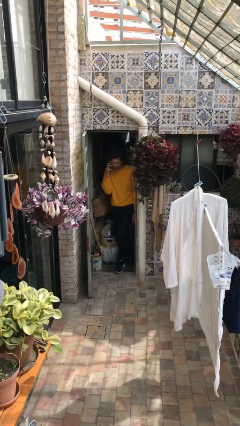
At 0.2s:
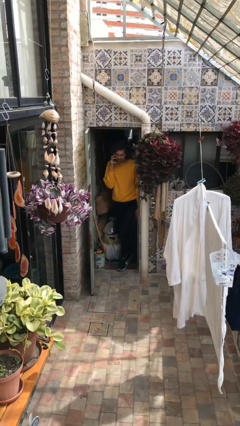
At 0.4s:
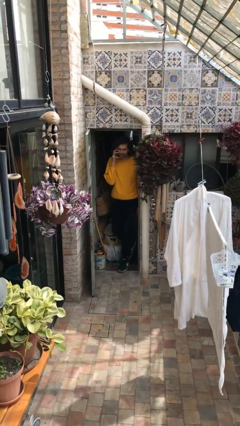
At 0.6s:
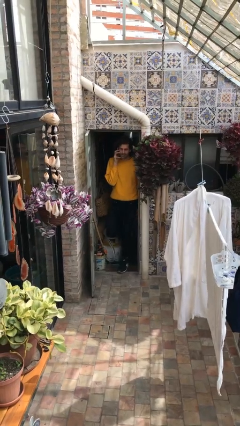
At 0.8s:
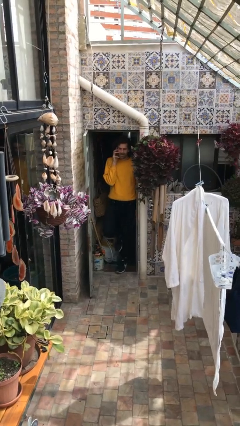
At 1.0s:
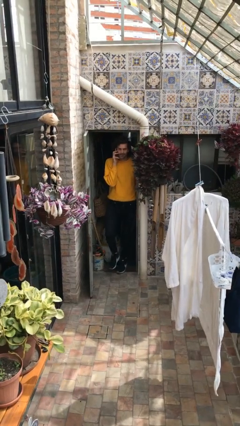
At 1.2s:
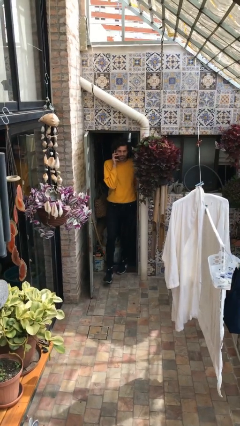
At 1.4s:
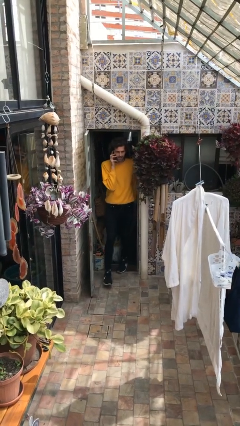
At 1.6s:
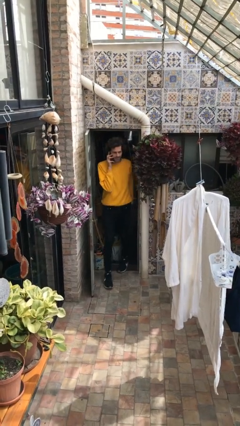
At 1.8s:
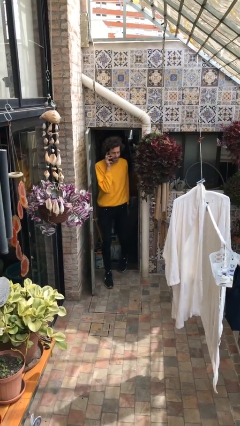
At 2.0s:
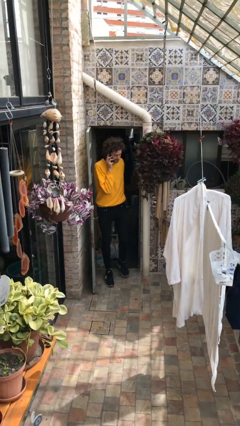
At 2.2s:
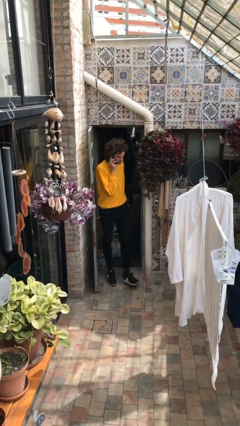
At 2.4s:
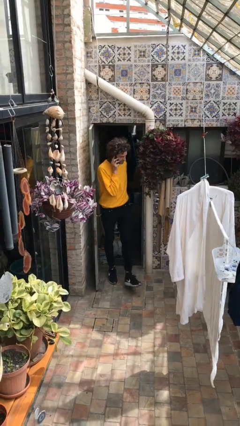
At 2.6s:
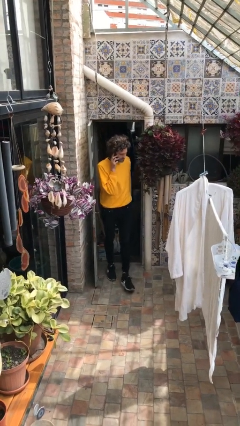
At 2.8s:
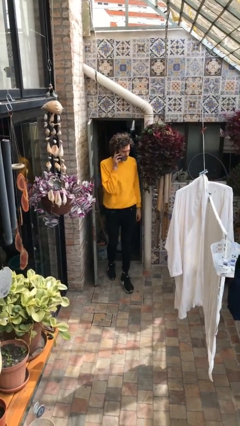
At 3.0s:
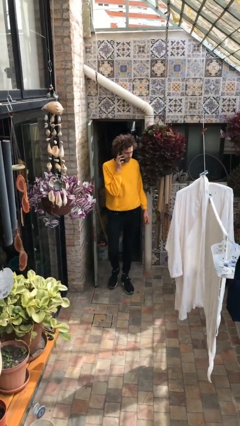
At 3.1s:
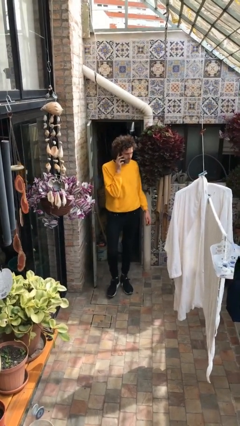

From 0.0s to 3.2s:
person enters scene through structure

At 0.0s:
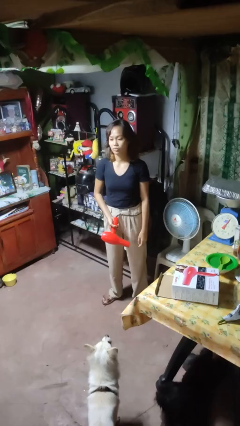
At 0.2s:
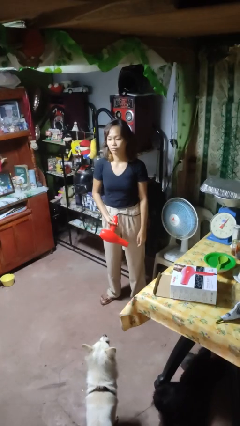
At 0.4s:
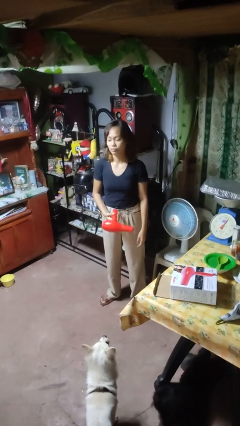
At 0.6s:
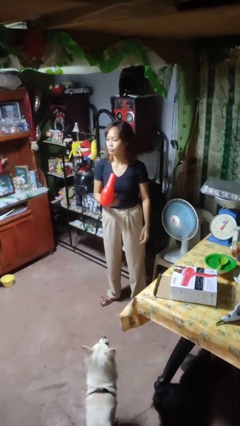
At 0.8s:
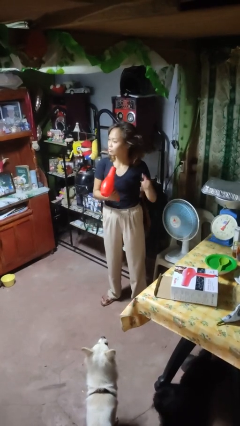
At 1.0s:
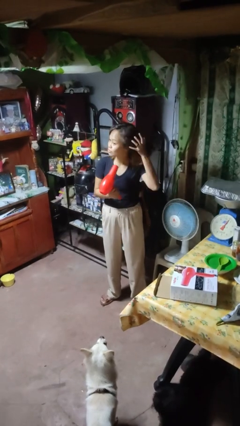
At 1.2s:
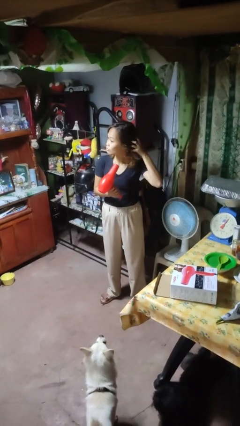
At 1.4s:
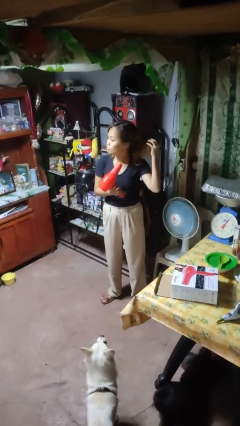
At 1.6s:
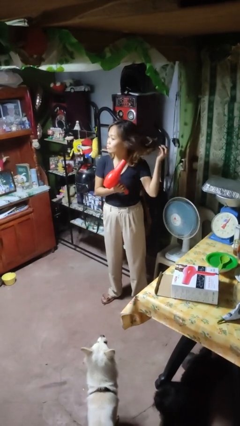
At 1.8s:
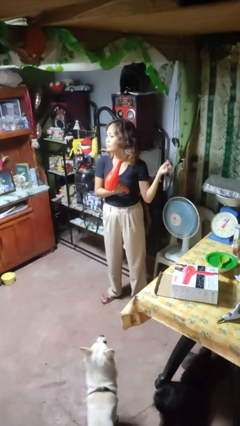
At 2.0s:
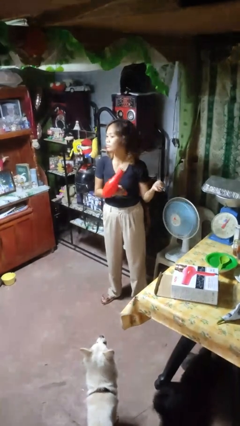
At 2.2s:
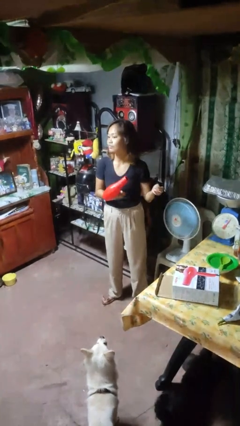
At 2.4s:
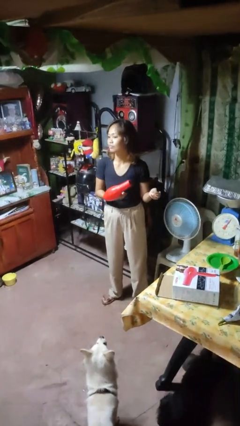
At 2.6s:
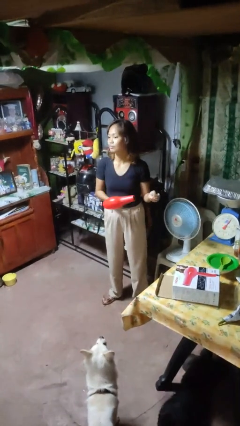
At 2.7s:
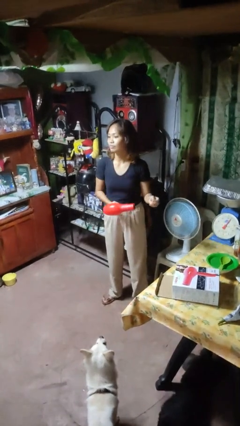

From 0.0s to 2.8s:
person dries hair with hairdryer

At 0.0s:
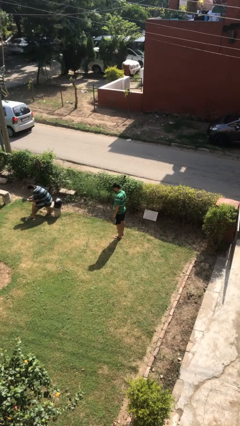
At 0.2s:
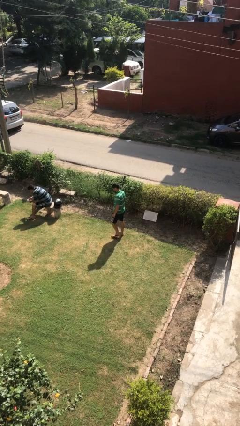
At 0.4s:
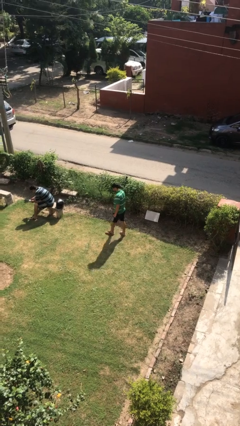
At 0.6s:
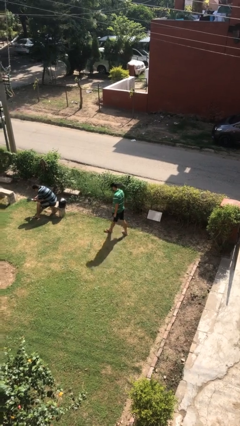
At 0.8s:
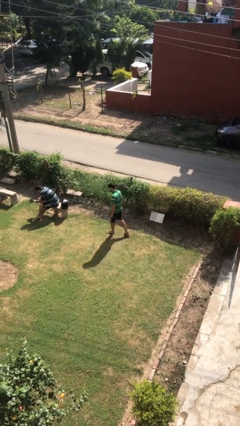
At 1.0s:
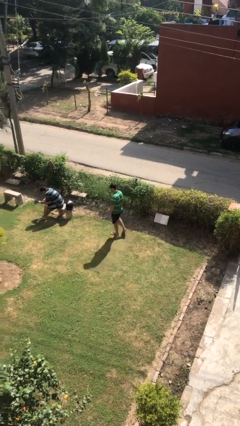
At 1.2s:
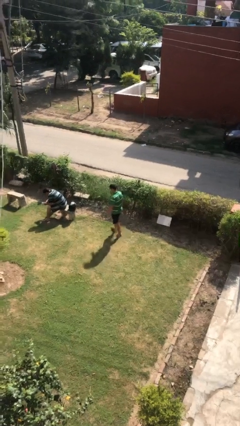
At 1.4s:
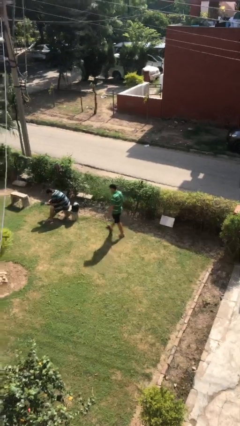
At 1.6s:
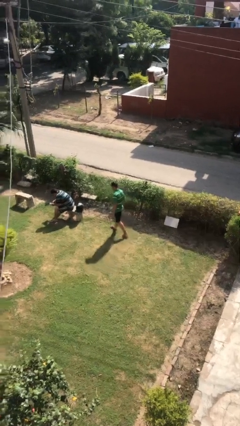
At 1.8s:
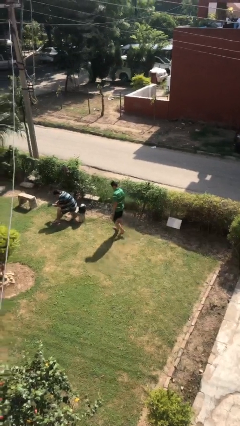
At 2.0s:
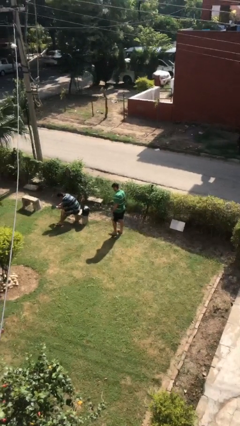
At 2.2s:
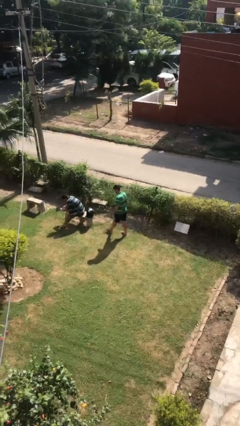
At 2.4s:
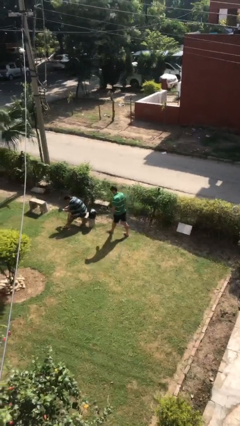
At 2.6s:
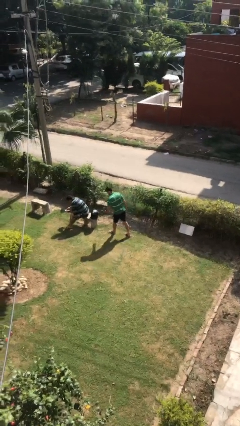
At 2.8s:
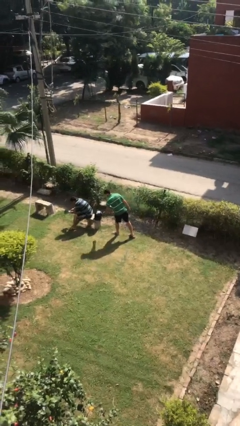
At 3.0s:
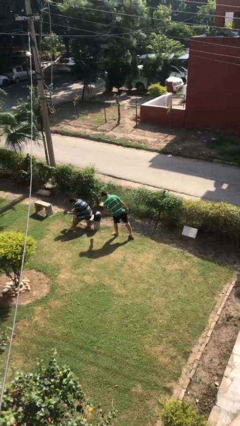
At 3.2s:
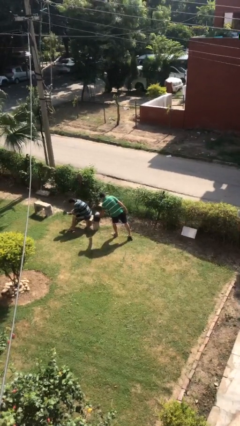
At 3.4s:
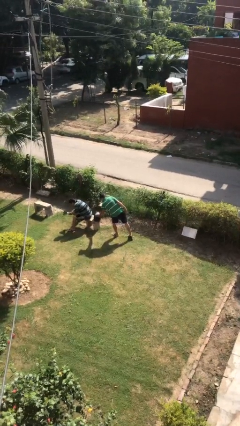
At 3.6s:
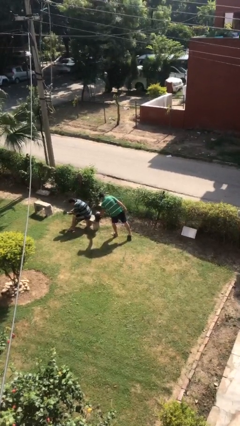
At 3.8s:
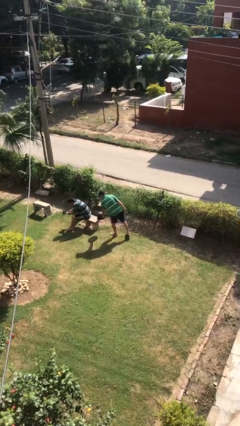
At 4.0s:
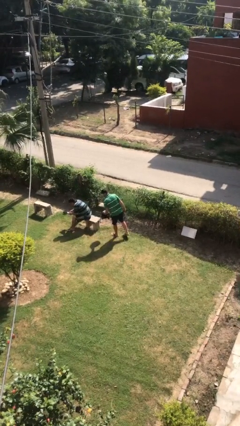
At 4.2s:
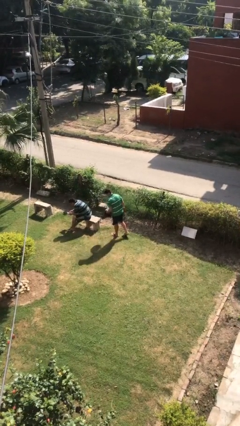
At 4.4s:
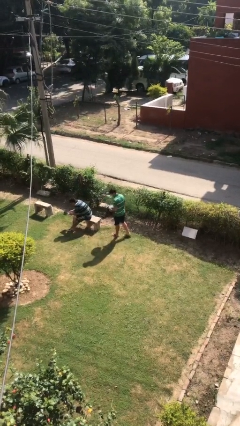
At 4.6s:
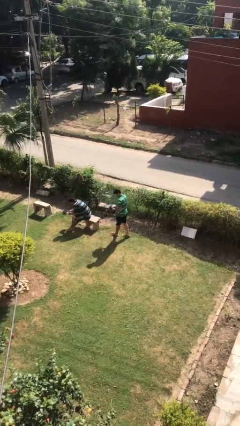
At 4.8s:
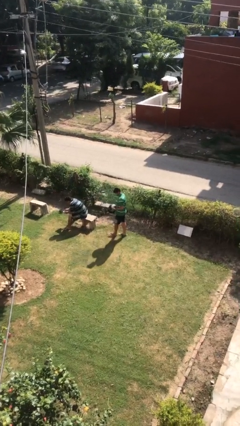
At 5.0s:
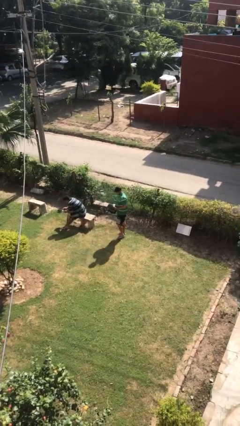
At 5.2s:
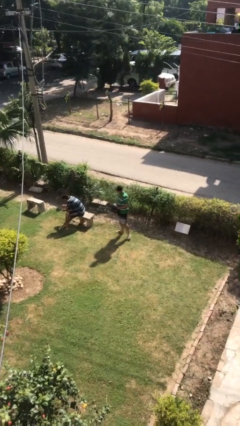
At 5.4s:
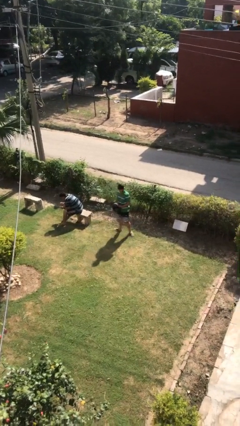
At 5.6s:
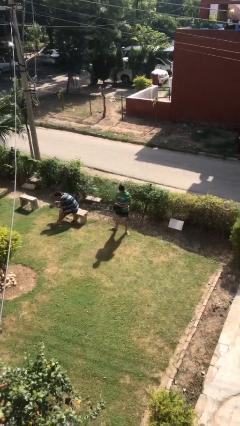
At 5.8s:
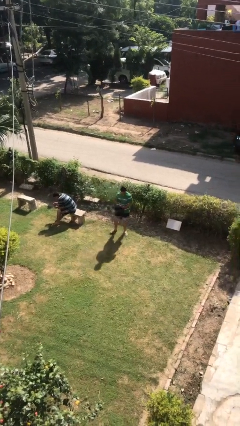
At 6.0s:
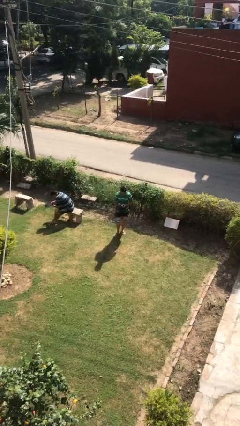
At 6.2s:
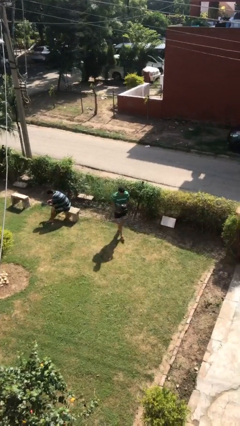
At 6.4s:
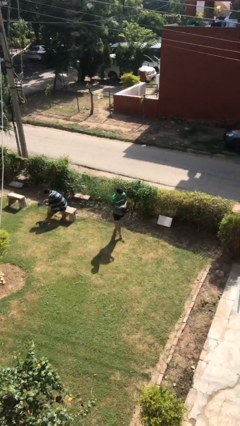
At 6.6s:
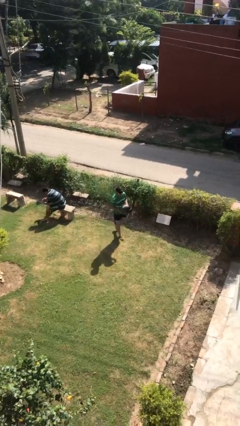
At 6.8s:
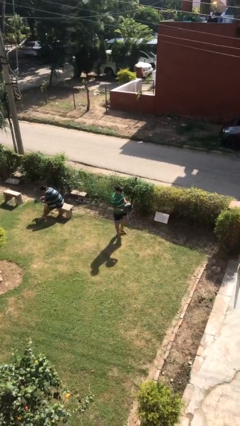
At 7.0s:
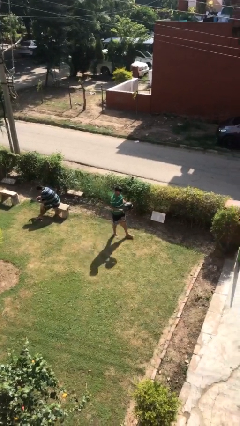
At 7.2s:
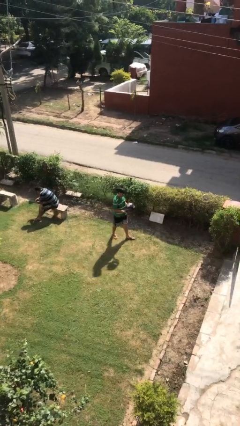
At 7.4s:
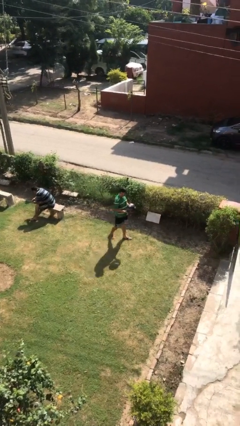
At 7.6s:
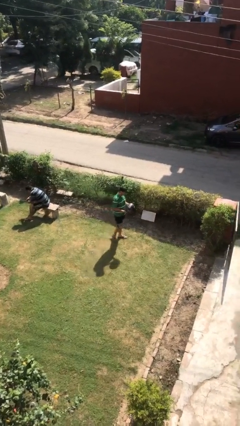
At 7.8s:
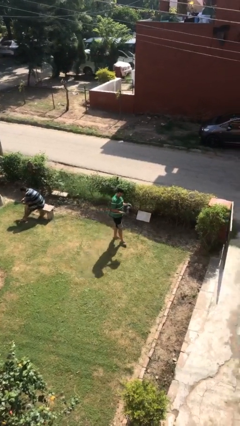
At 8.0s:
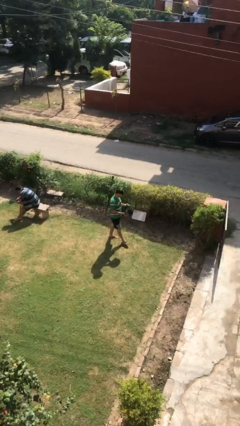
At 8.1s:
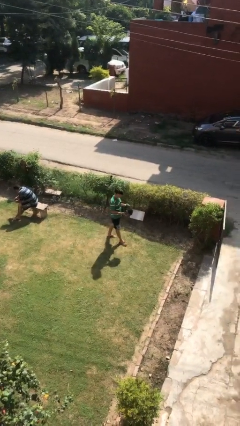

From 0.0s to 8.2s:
person steals object from person

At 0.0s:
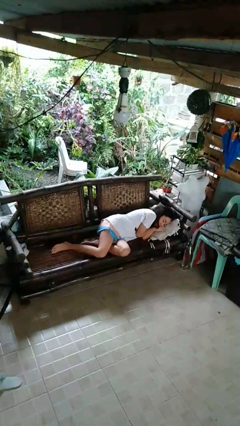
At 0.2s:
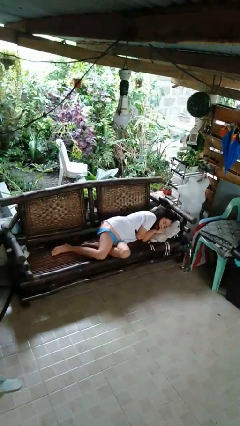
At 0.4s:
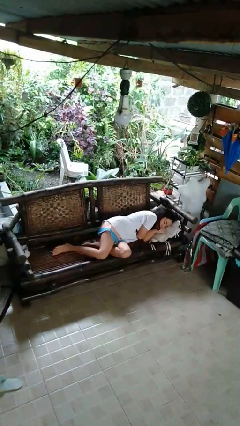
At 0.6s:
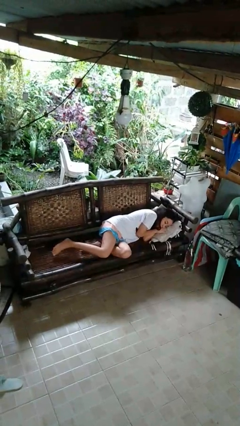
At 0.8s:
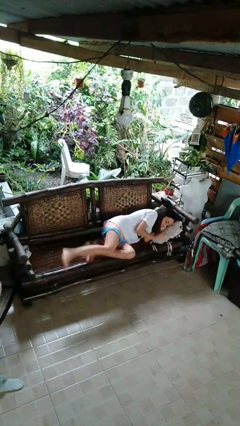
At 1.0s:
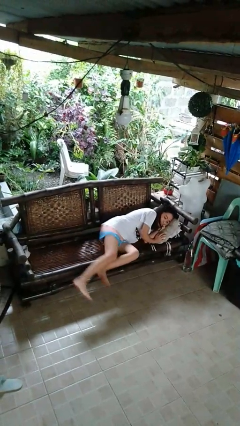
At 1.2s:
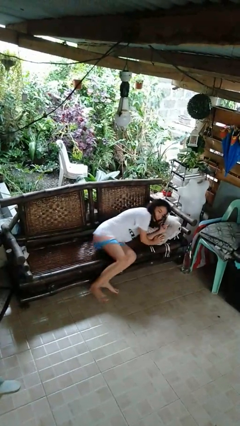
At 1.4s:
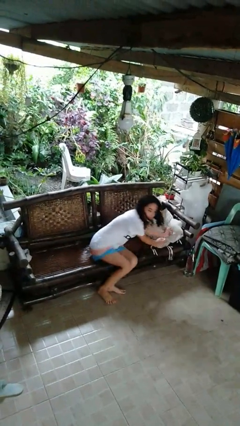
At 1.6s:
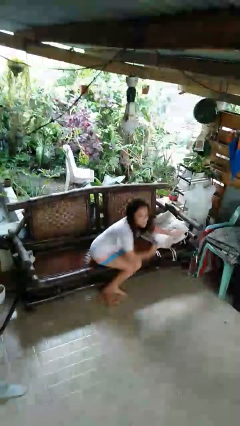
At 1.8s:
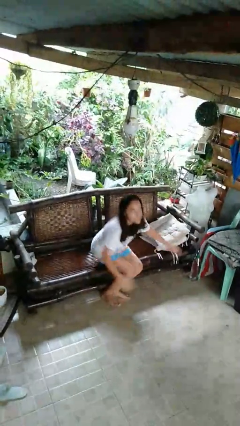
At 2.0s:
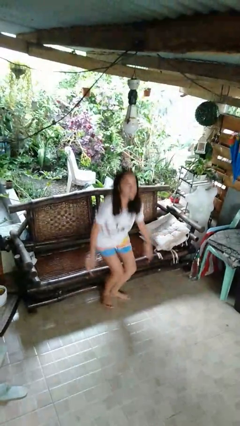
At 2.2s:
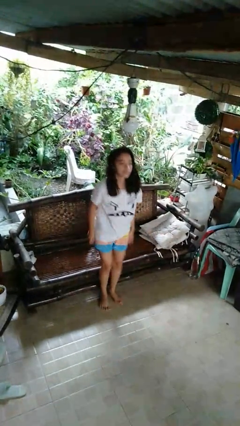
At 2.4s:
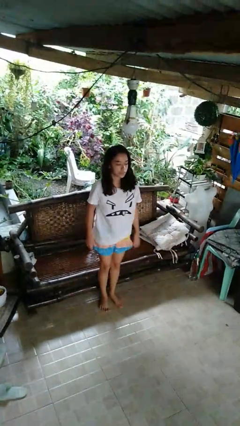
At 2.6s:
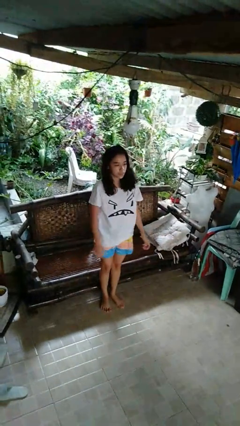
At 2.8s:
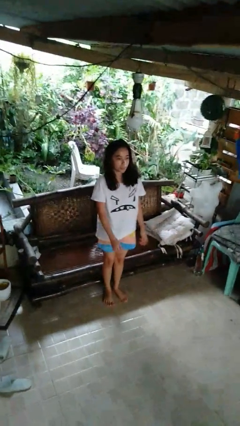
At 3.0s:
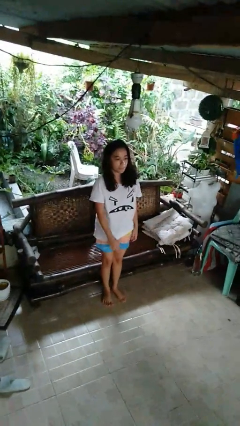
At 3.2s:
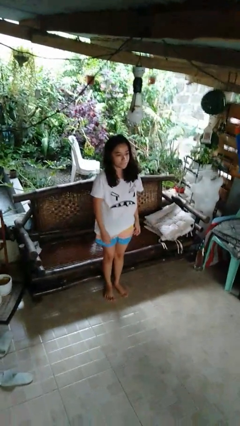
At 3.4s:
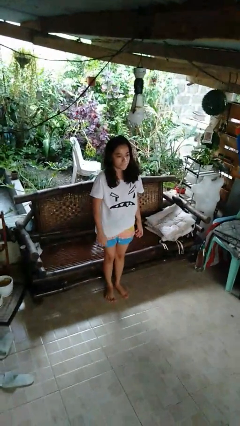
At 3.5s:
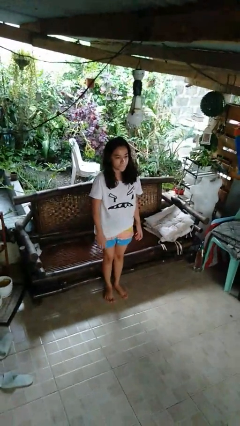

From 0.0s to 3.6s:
person stands up
